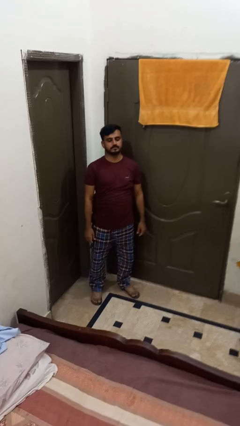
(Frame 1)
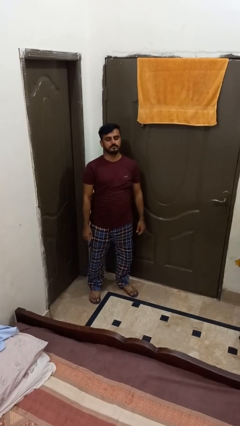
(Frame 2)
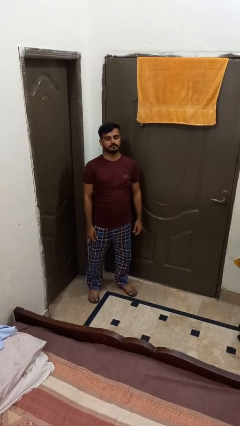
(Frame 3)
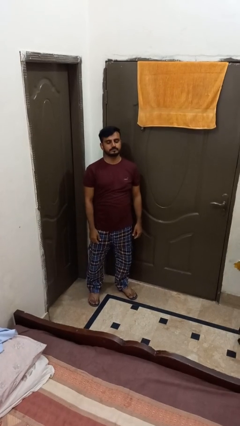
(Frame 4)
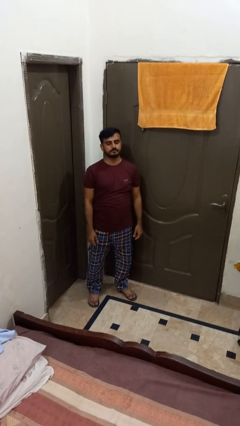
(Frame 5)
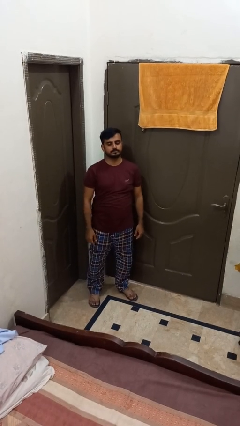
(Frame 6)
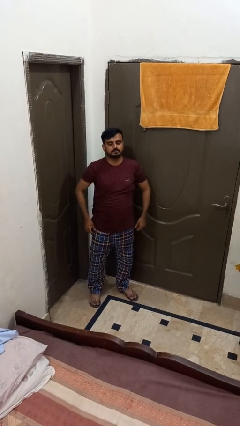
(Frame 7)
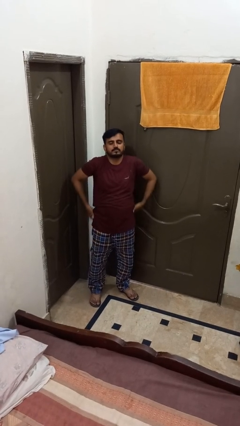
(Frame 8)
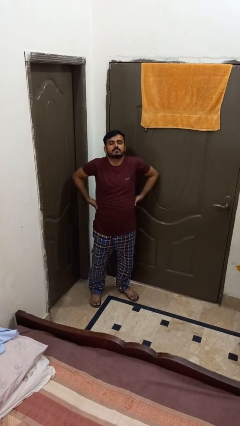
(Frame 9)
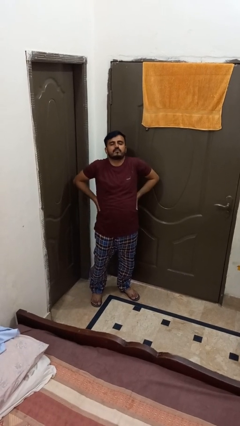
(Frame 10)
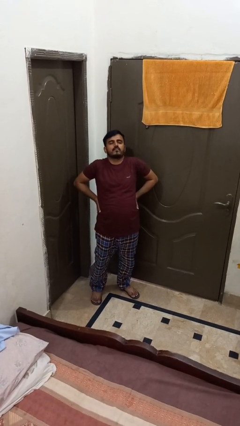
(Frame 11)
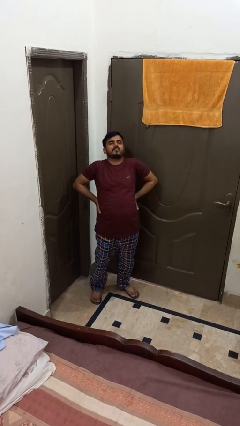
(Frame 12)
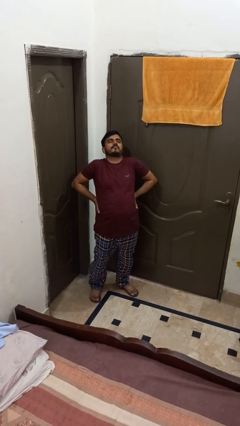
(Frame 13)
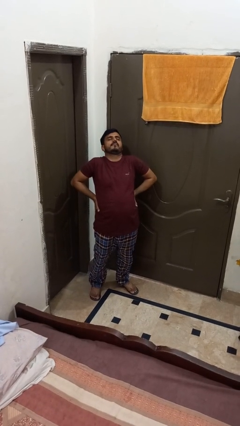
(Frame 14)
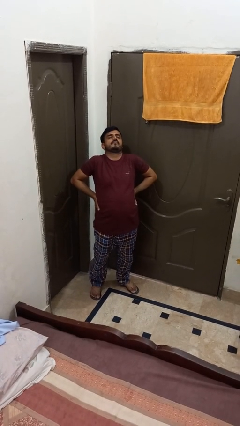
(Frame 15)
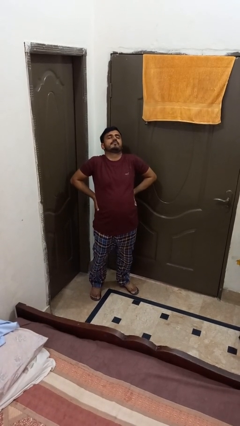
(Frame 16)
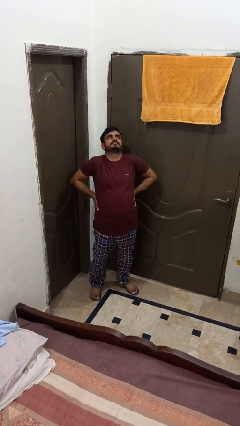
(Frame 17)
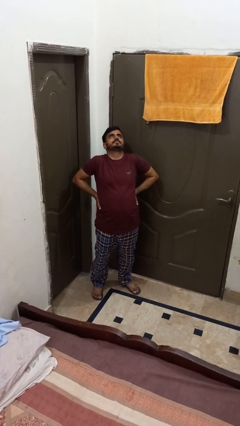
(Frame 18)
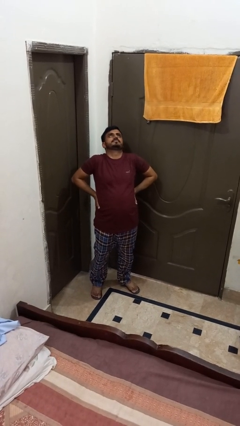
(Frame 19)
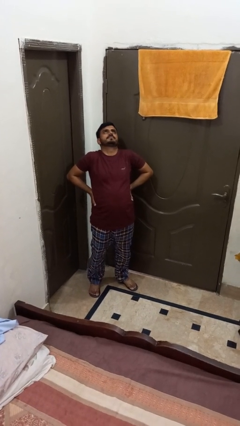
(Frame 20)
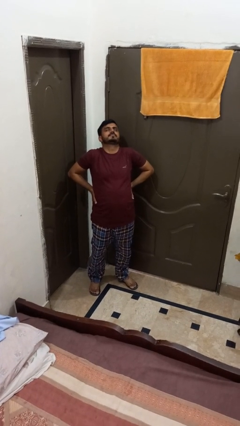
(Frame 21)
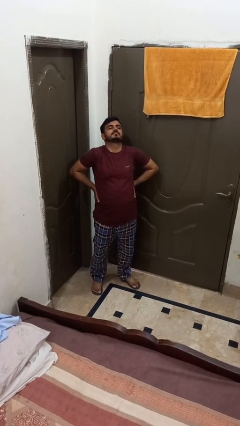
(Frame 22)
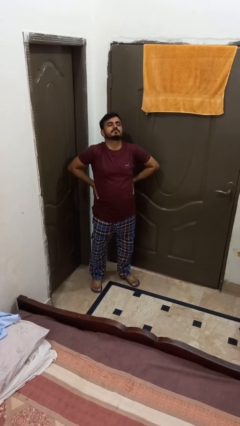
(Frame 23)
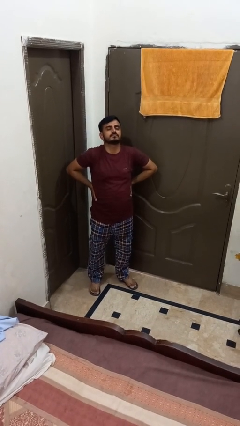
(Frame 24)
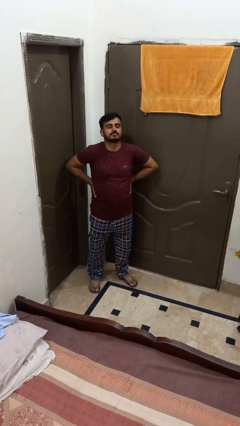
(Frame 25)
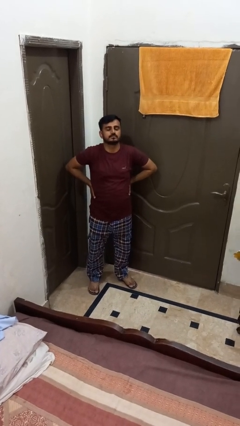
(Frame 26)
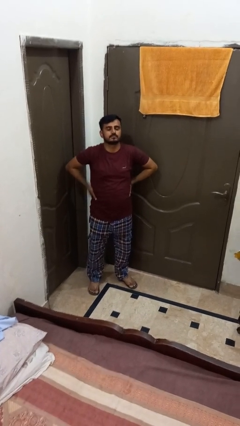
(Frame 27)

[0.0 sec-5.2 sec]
person stretches back

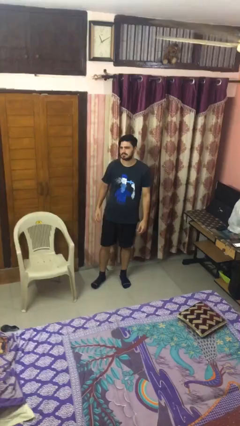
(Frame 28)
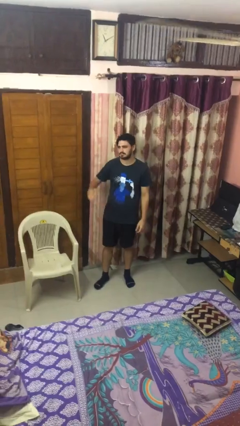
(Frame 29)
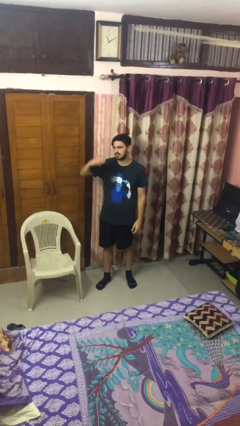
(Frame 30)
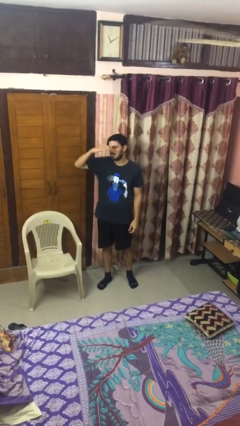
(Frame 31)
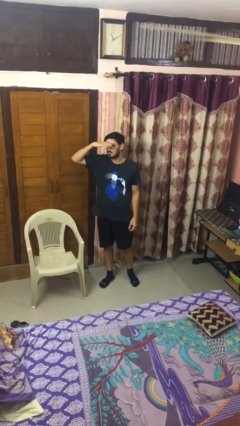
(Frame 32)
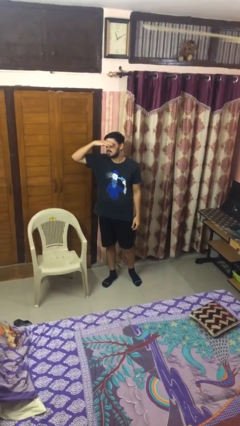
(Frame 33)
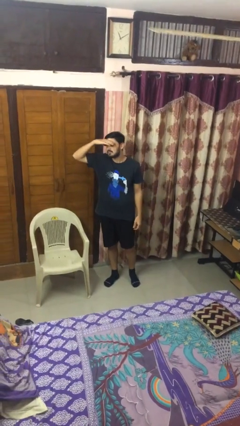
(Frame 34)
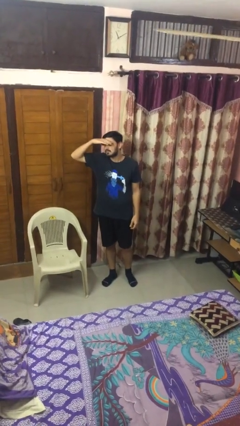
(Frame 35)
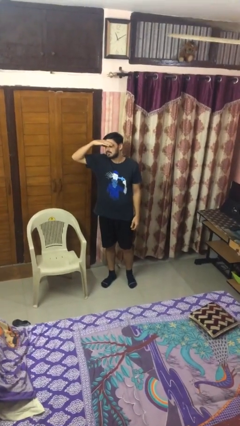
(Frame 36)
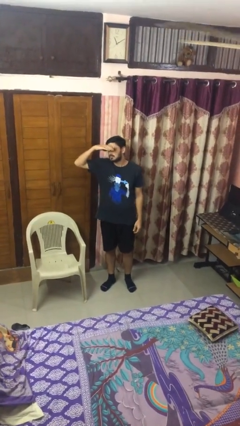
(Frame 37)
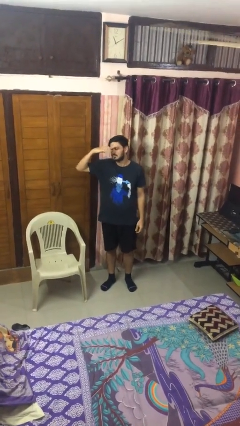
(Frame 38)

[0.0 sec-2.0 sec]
person shades eyes

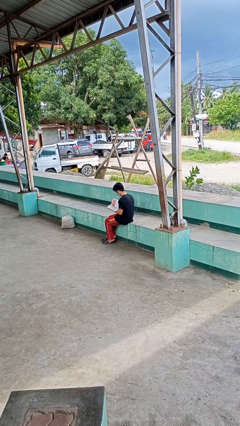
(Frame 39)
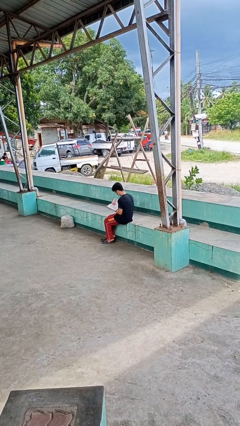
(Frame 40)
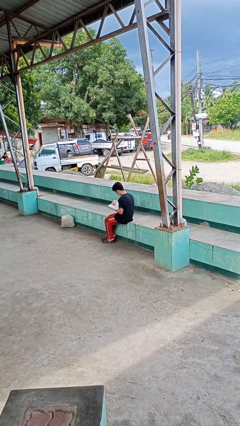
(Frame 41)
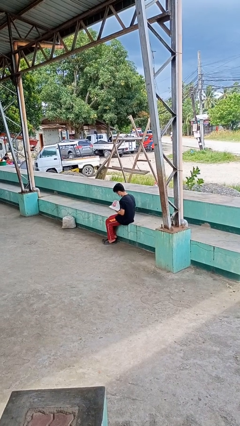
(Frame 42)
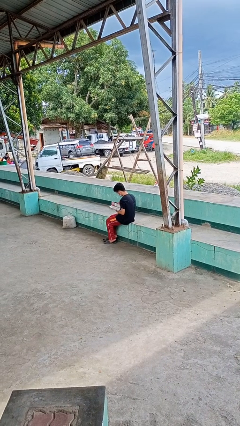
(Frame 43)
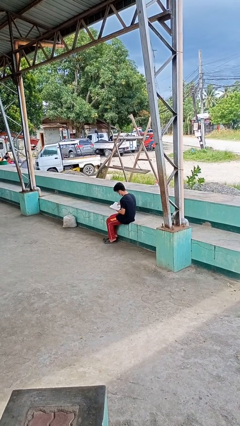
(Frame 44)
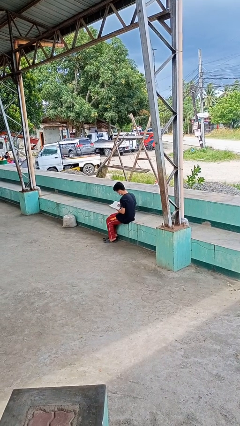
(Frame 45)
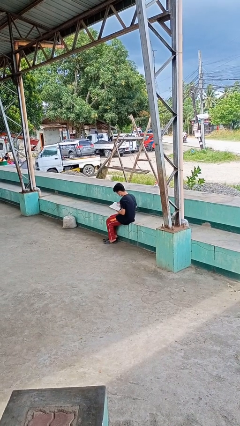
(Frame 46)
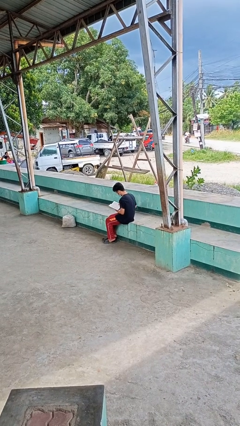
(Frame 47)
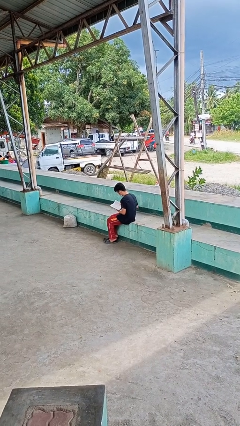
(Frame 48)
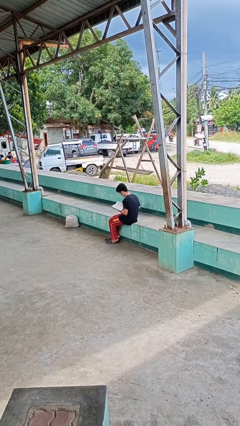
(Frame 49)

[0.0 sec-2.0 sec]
person reads book

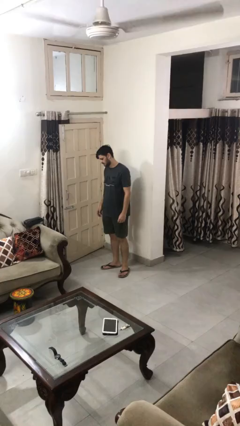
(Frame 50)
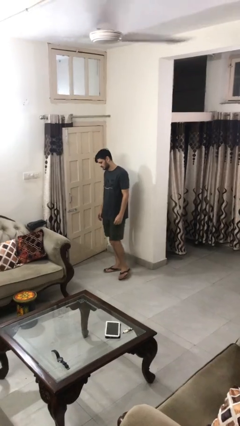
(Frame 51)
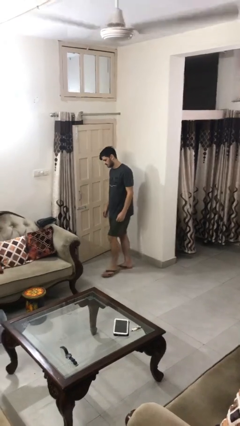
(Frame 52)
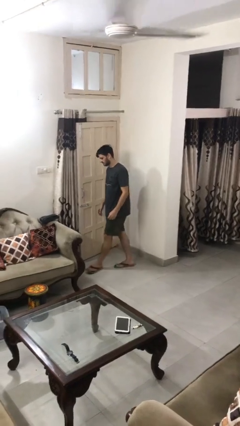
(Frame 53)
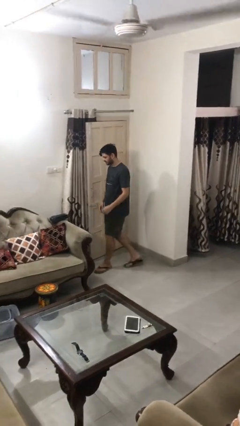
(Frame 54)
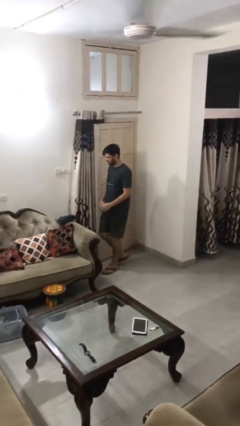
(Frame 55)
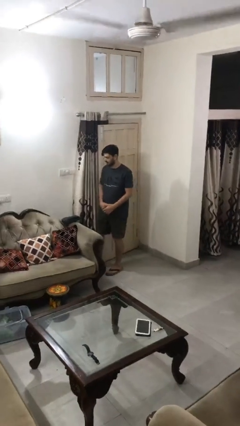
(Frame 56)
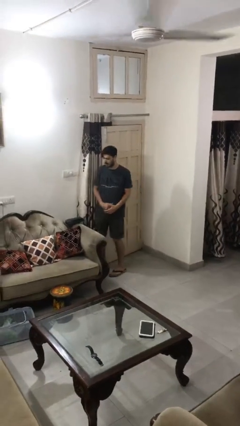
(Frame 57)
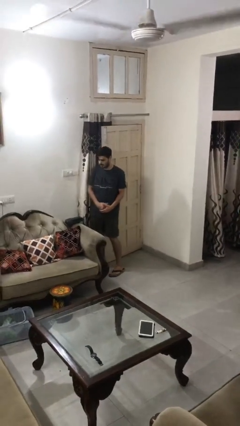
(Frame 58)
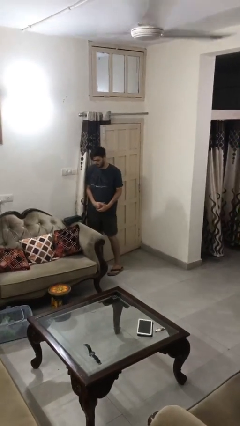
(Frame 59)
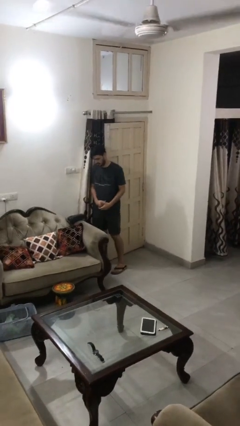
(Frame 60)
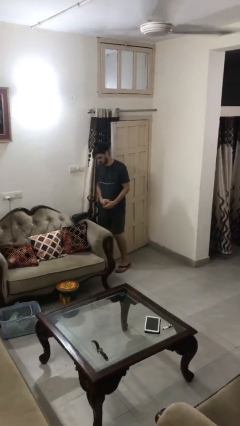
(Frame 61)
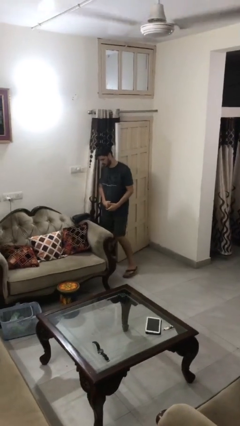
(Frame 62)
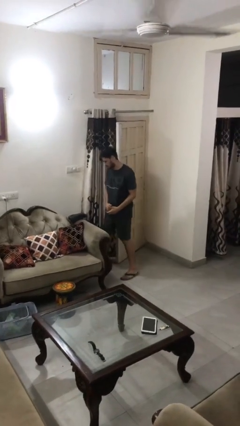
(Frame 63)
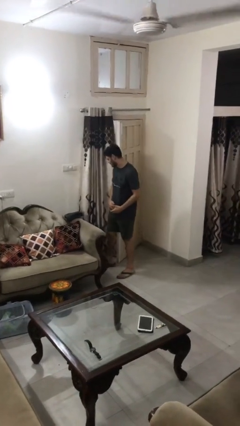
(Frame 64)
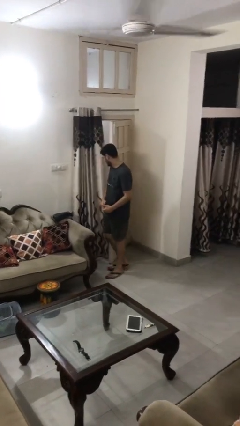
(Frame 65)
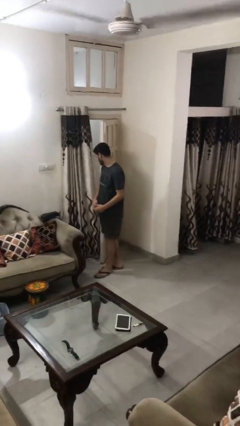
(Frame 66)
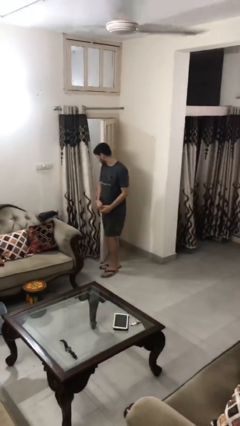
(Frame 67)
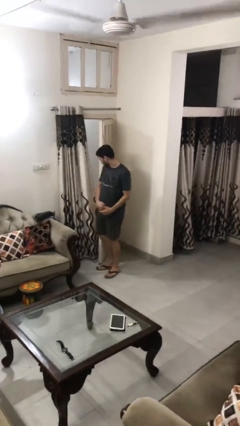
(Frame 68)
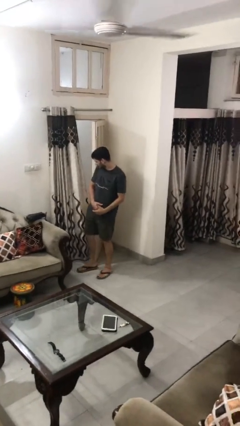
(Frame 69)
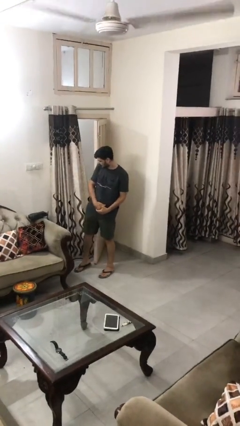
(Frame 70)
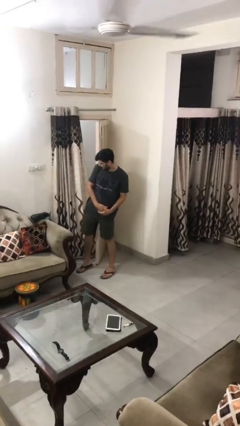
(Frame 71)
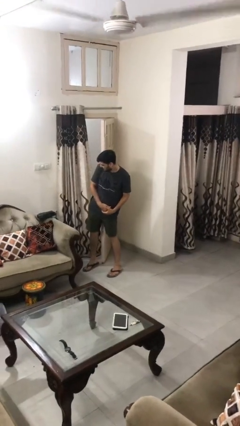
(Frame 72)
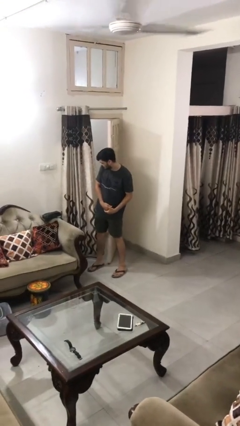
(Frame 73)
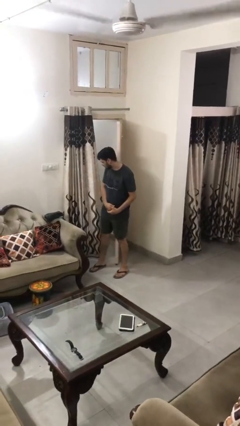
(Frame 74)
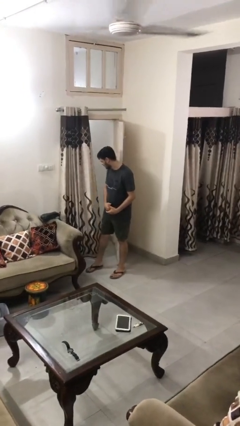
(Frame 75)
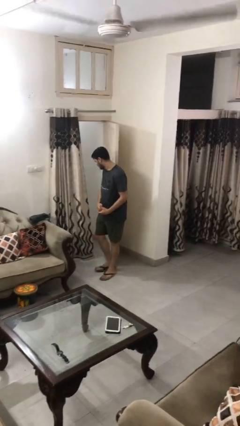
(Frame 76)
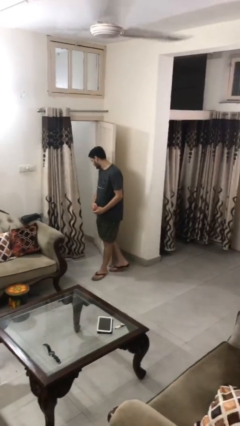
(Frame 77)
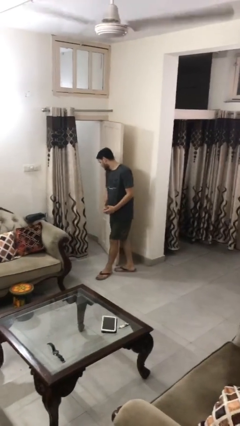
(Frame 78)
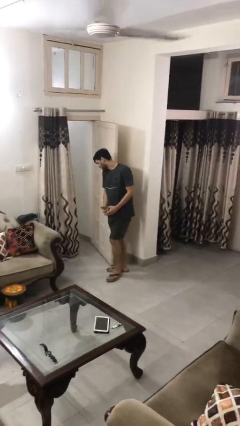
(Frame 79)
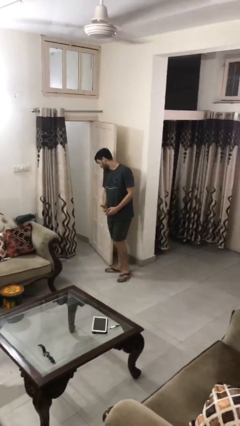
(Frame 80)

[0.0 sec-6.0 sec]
person opens facility door

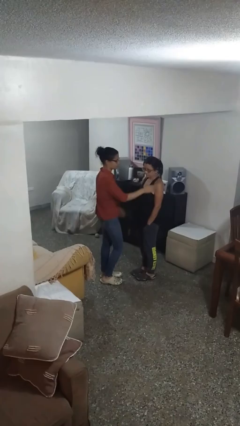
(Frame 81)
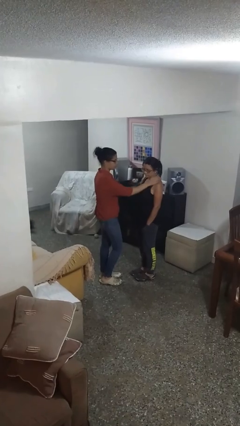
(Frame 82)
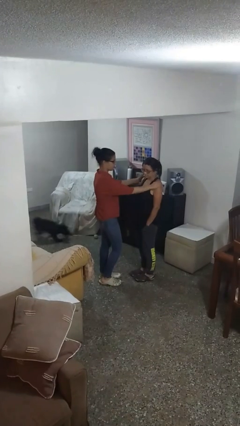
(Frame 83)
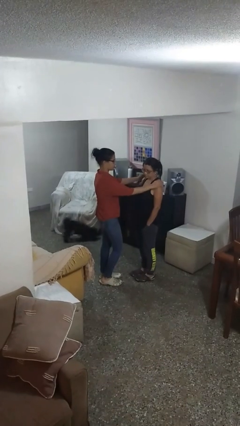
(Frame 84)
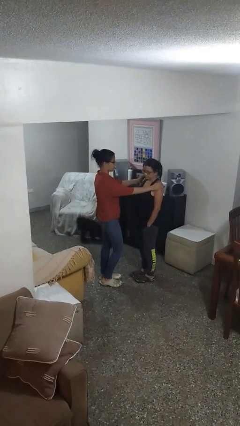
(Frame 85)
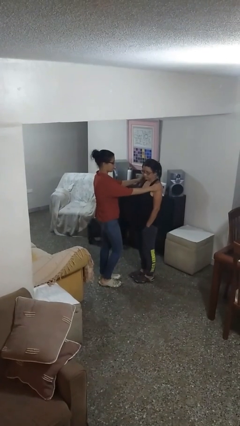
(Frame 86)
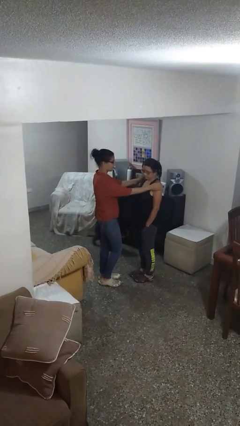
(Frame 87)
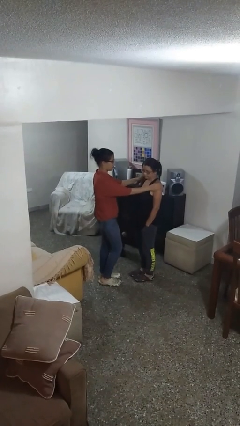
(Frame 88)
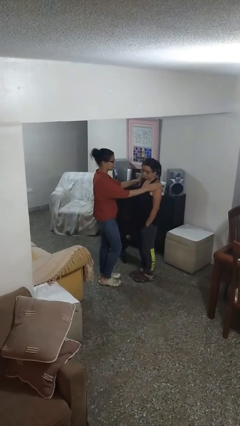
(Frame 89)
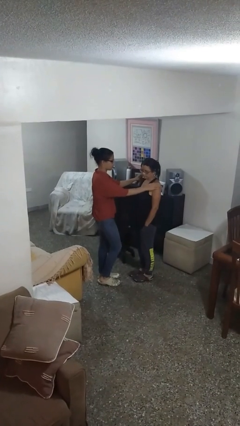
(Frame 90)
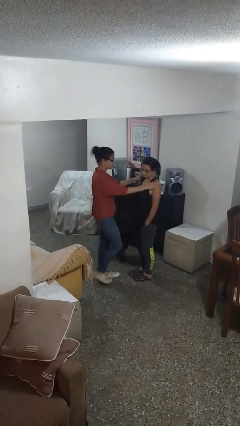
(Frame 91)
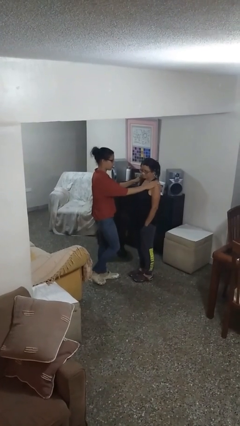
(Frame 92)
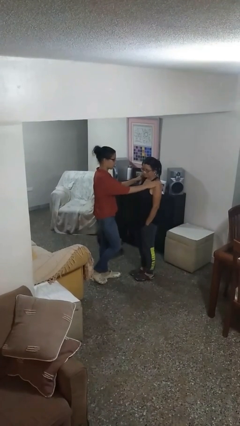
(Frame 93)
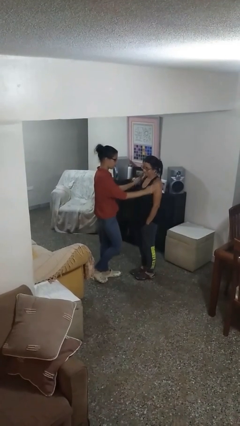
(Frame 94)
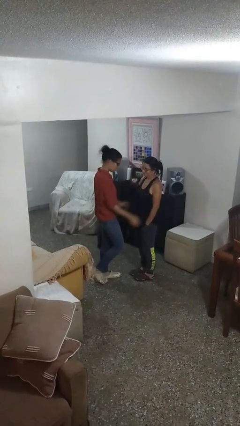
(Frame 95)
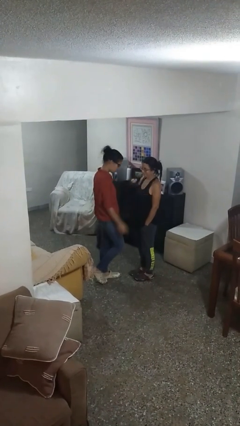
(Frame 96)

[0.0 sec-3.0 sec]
person pounds shoulders of person
